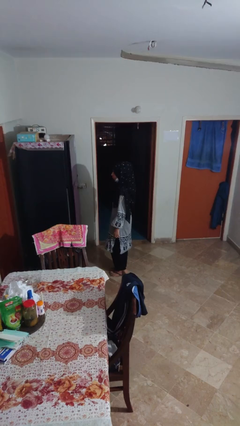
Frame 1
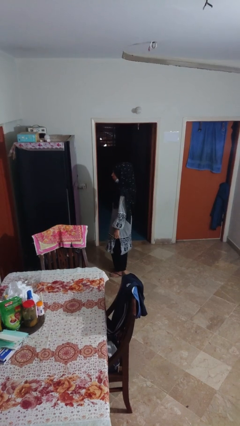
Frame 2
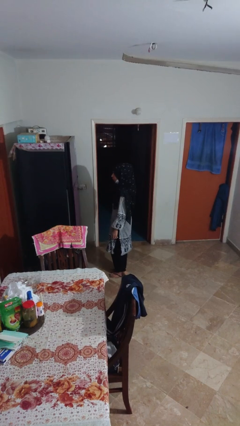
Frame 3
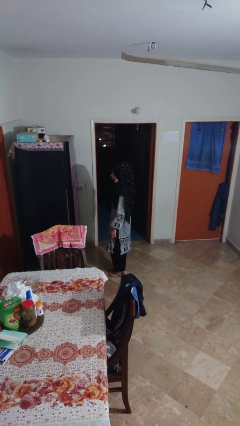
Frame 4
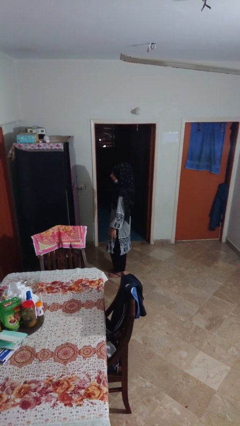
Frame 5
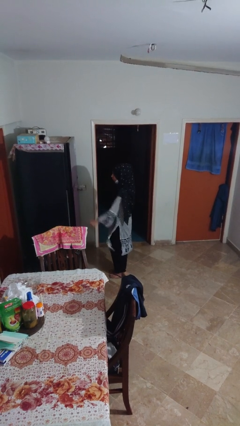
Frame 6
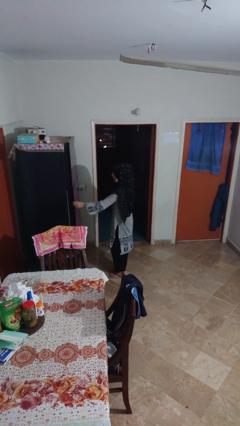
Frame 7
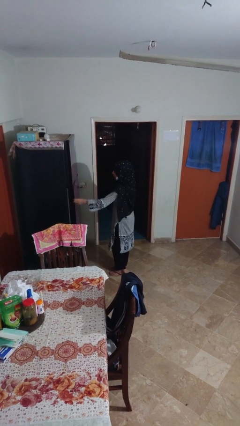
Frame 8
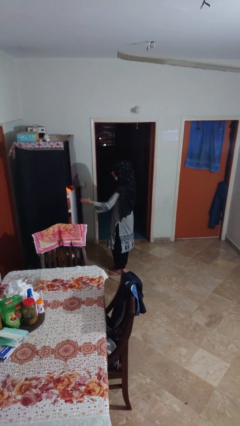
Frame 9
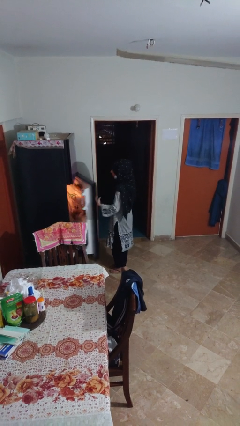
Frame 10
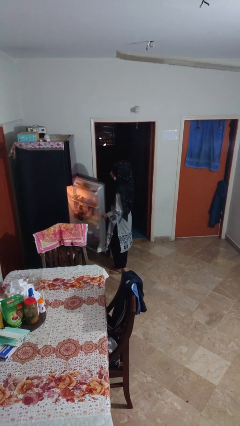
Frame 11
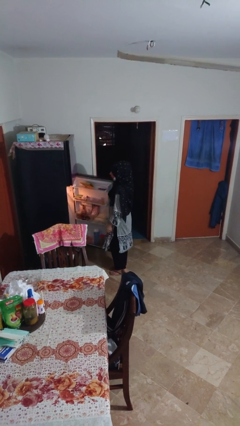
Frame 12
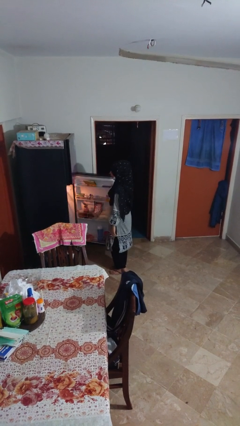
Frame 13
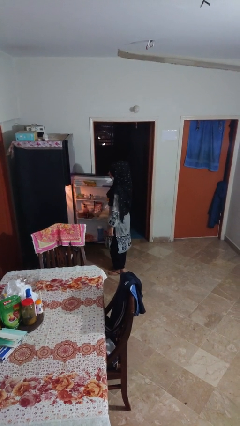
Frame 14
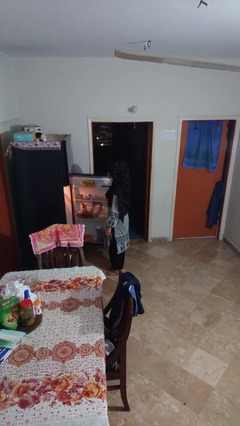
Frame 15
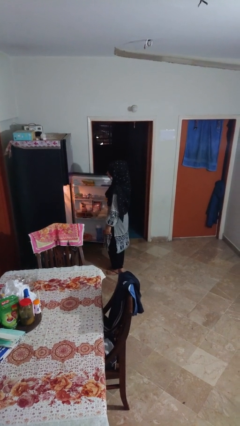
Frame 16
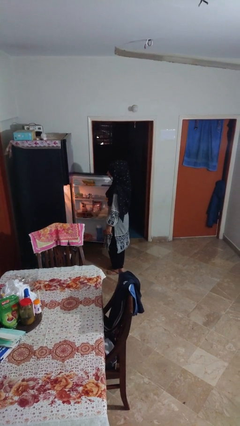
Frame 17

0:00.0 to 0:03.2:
person opens refrigerator

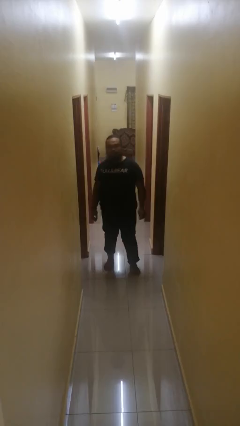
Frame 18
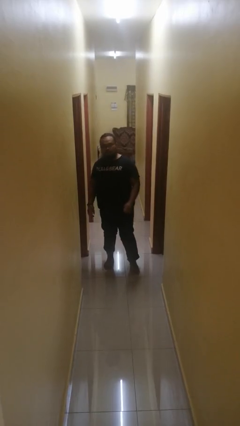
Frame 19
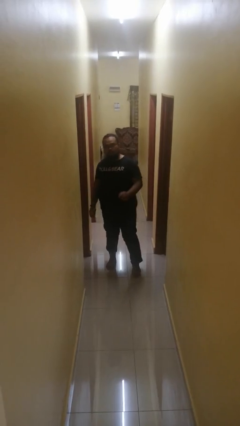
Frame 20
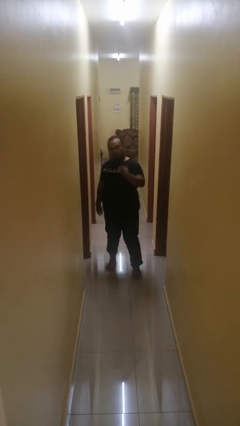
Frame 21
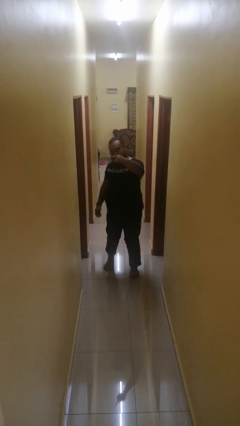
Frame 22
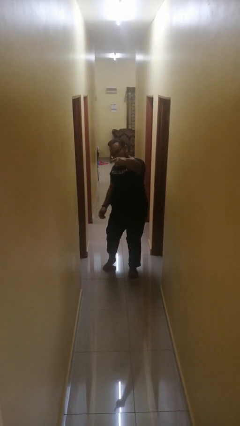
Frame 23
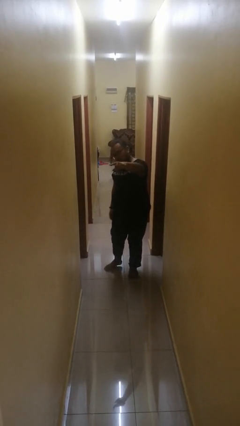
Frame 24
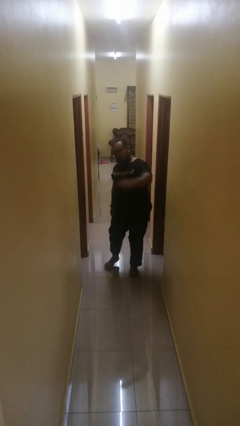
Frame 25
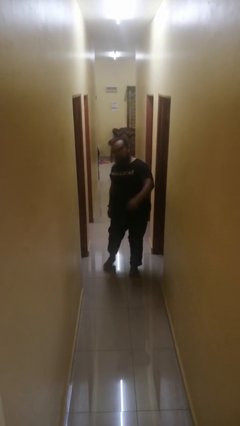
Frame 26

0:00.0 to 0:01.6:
person points at person

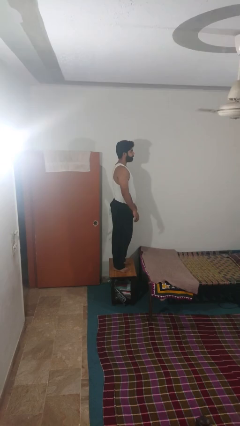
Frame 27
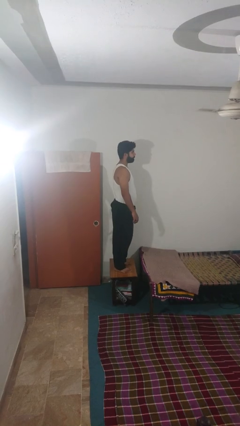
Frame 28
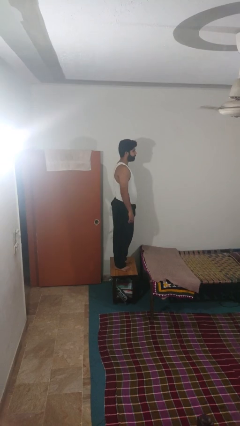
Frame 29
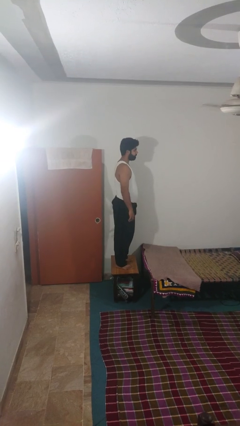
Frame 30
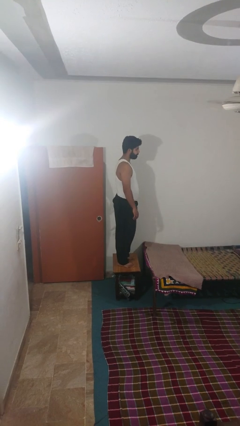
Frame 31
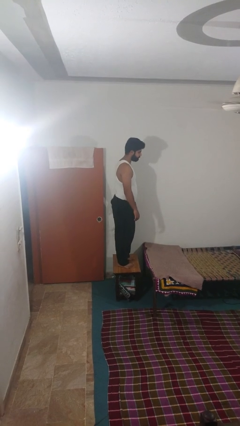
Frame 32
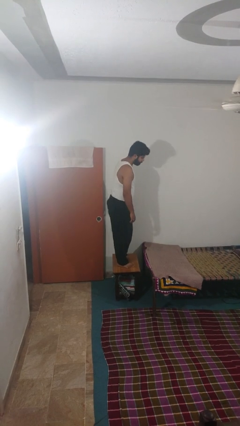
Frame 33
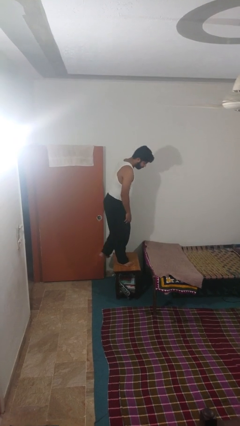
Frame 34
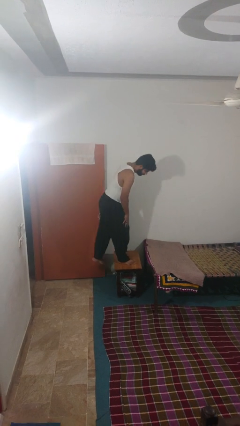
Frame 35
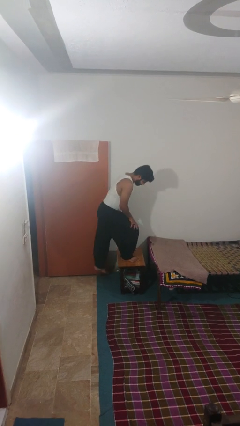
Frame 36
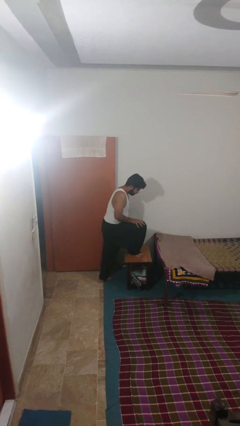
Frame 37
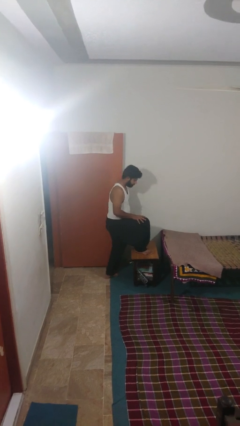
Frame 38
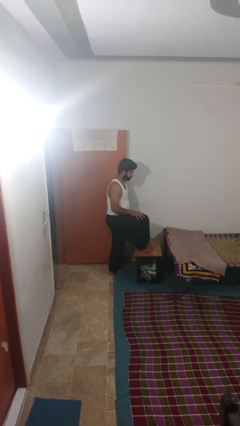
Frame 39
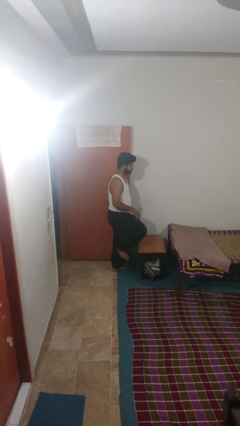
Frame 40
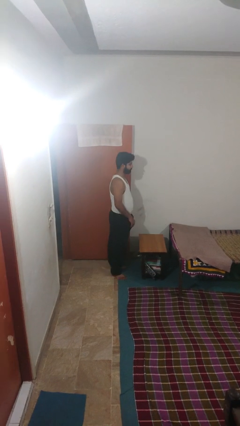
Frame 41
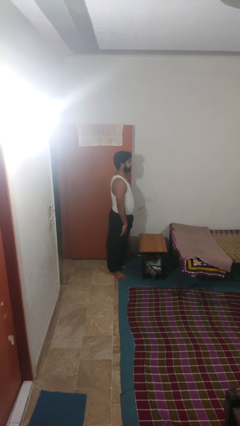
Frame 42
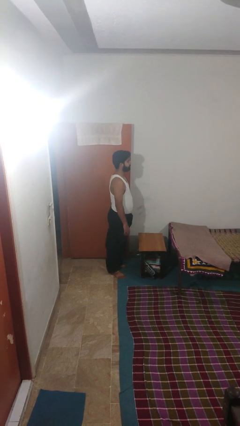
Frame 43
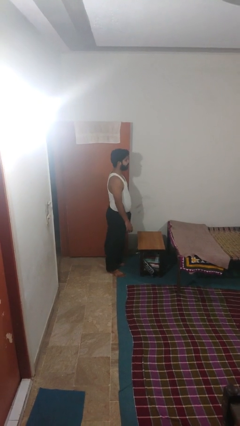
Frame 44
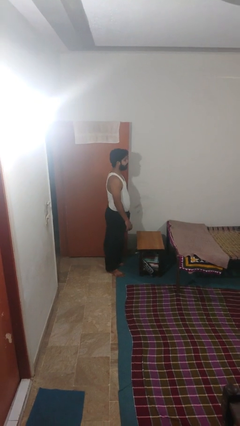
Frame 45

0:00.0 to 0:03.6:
person climbs off table

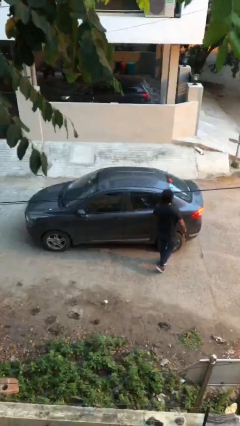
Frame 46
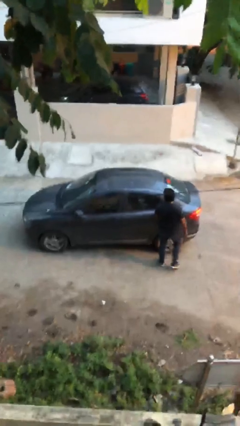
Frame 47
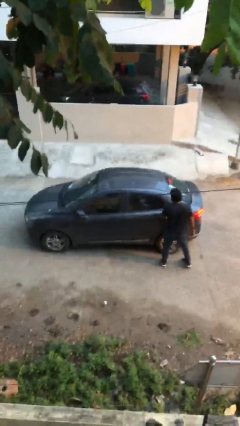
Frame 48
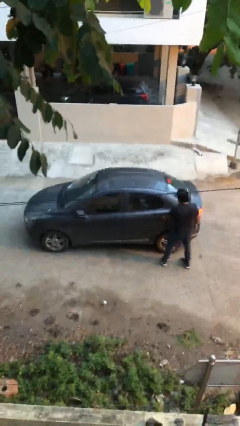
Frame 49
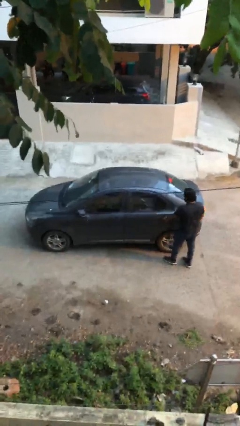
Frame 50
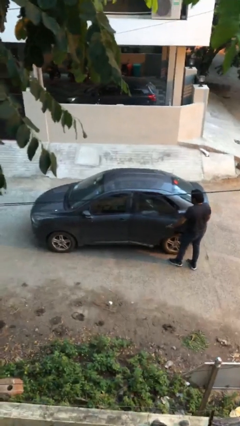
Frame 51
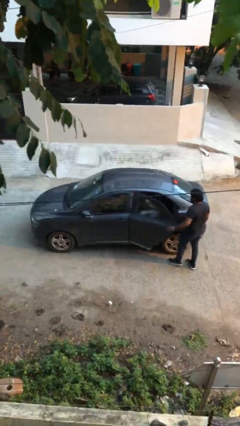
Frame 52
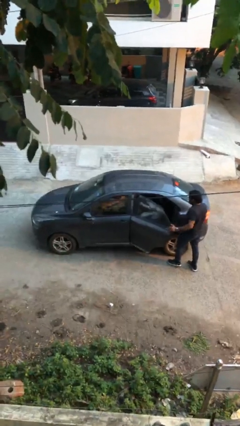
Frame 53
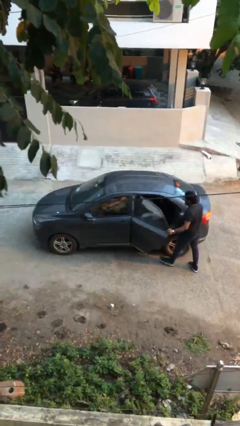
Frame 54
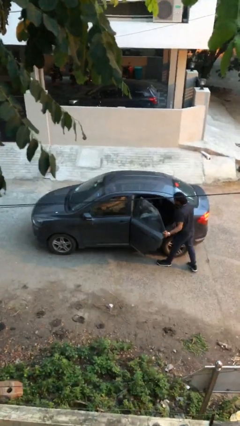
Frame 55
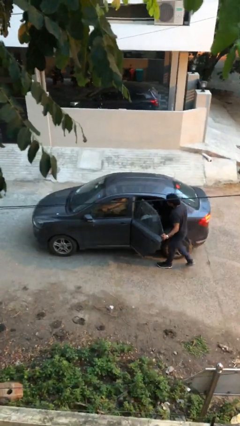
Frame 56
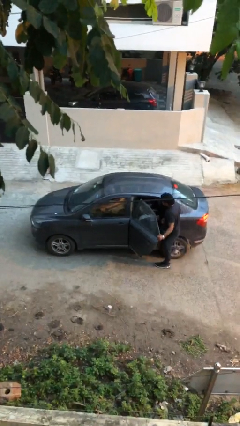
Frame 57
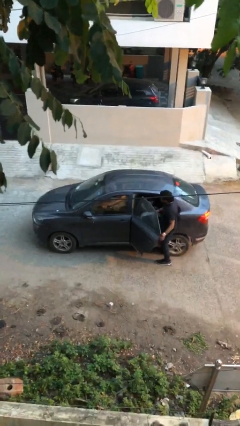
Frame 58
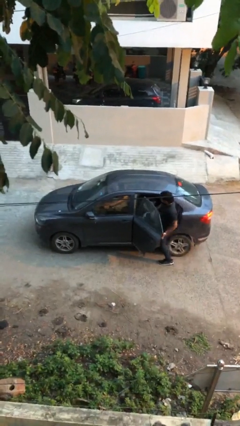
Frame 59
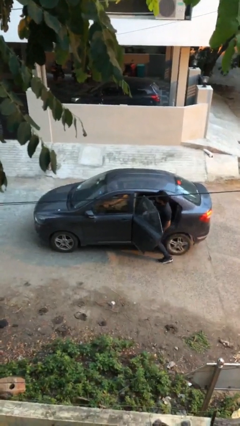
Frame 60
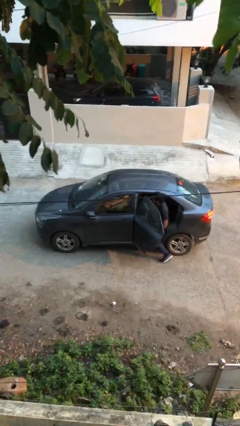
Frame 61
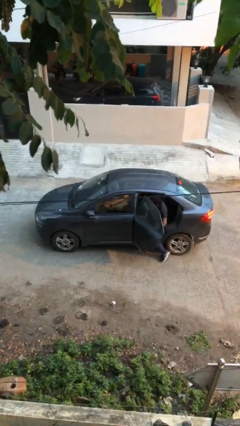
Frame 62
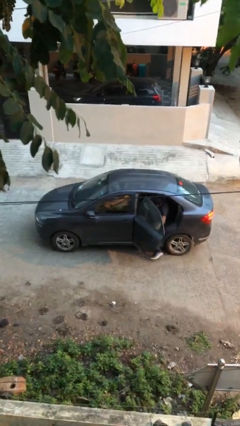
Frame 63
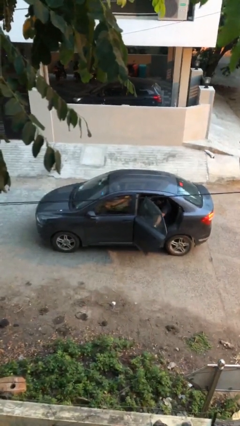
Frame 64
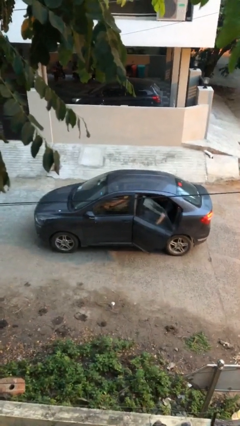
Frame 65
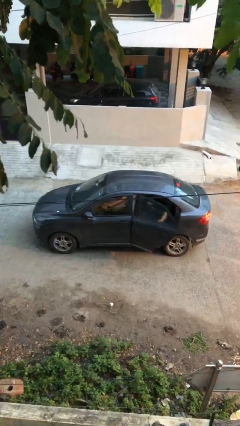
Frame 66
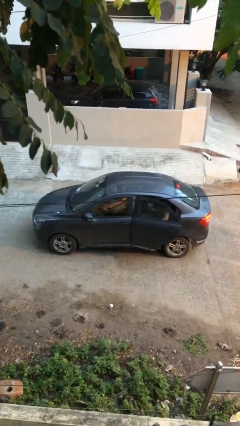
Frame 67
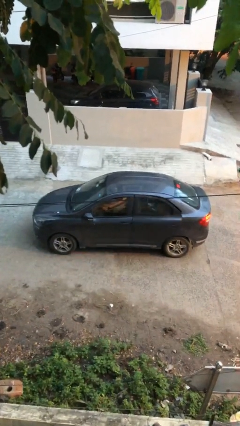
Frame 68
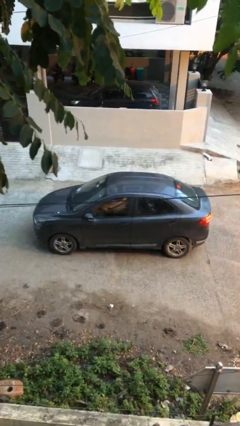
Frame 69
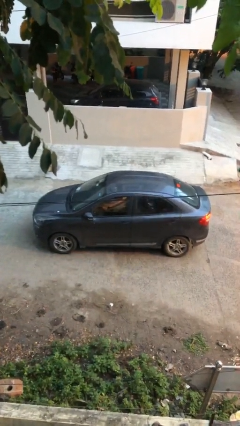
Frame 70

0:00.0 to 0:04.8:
car picks up person

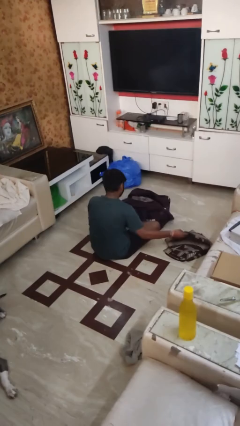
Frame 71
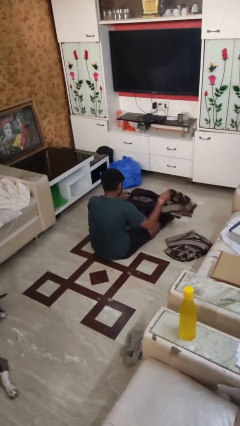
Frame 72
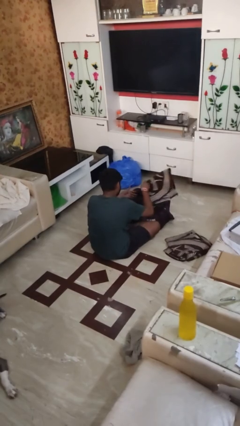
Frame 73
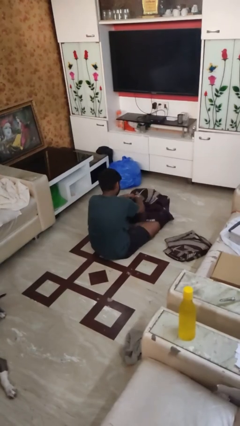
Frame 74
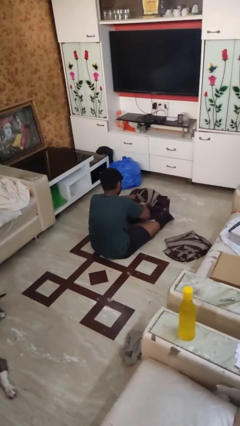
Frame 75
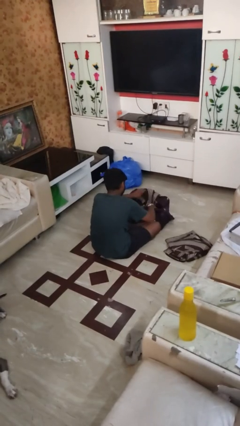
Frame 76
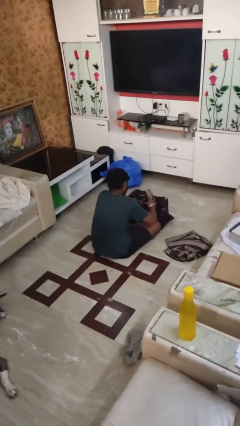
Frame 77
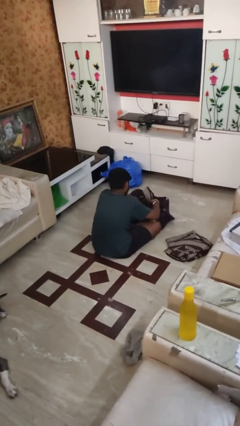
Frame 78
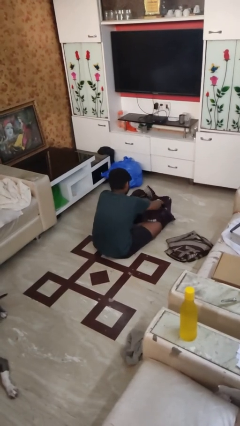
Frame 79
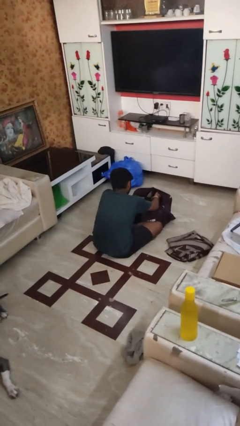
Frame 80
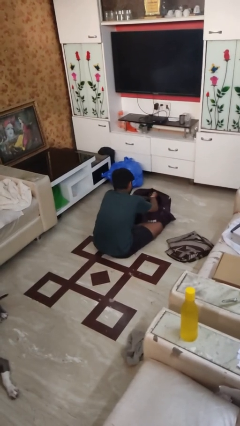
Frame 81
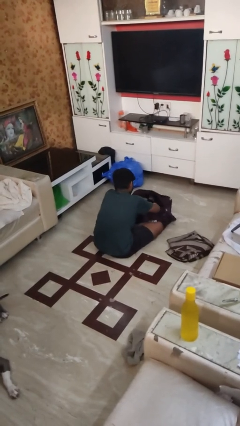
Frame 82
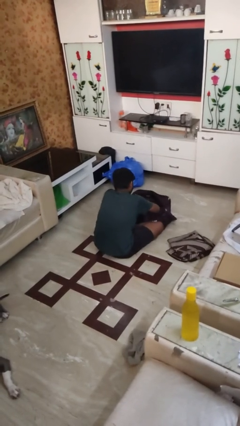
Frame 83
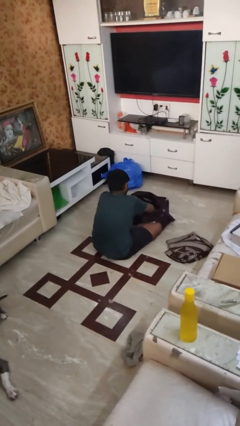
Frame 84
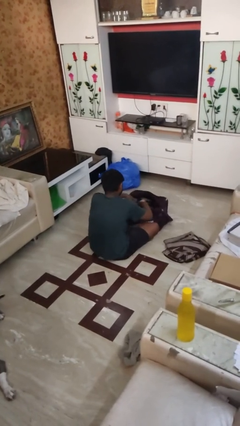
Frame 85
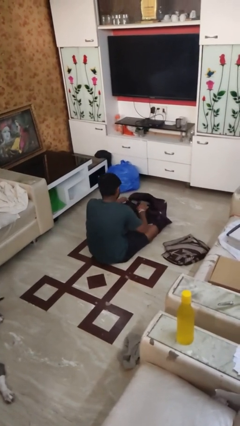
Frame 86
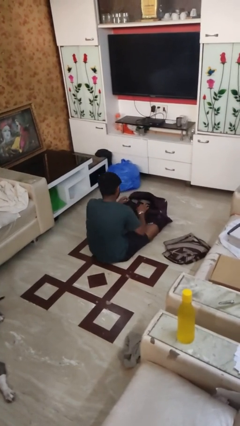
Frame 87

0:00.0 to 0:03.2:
person loads clothes into suitcase

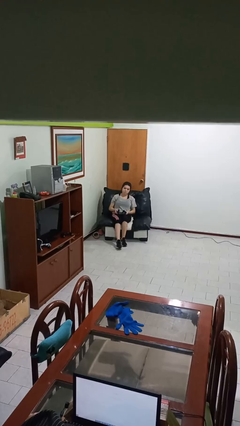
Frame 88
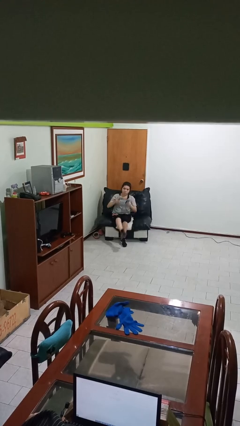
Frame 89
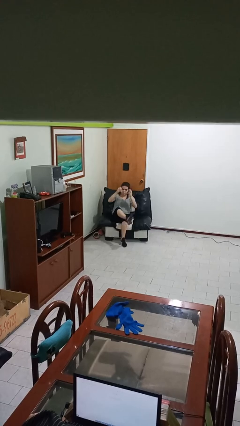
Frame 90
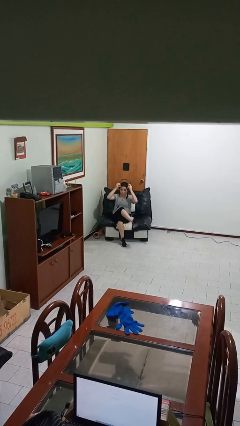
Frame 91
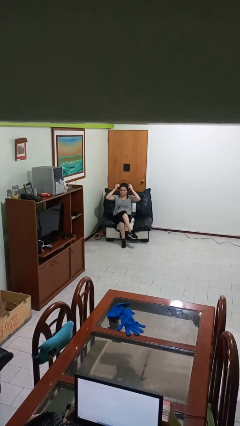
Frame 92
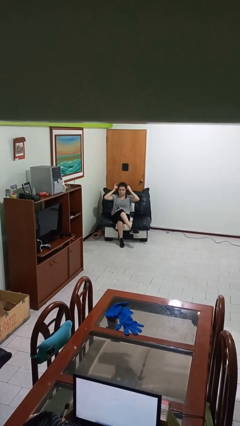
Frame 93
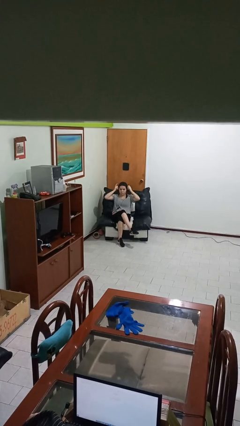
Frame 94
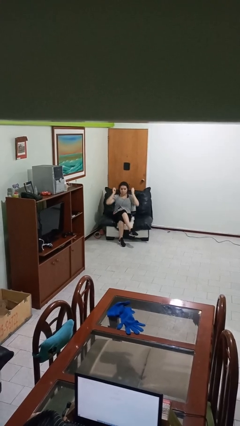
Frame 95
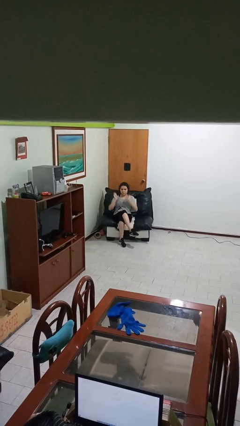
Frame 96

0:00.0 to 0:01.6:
person puts on headphones
